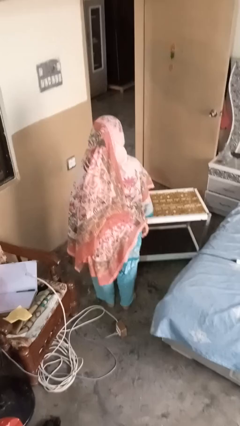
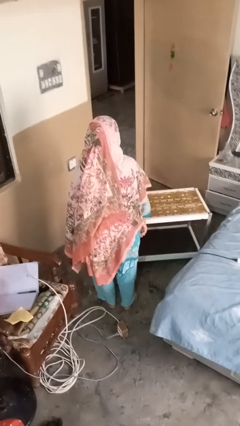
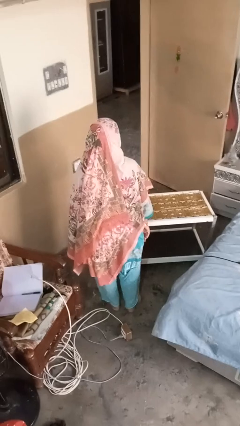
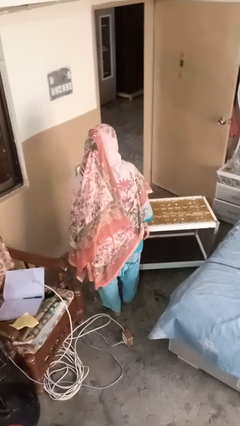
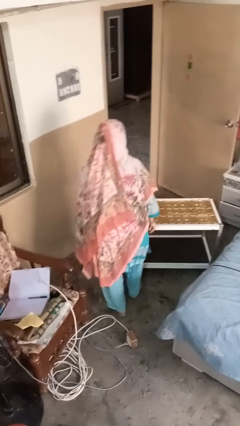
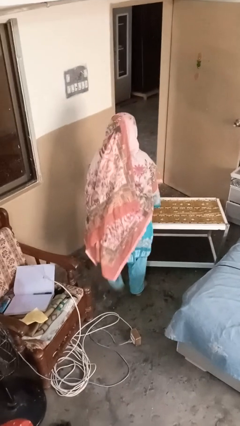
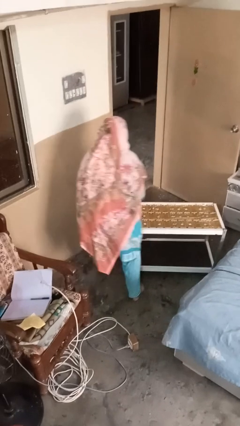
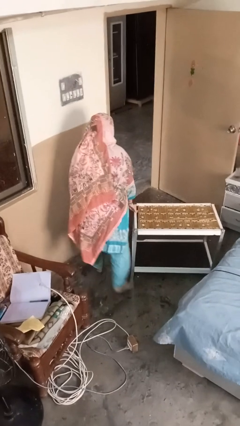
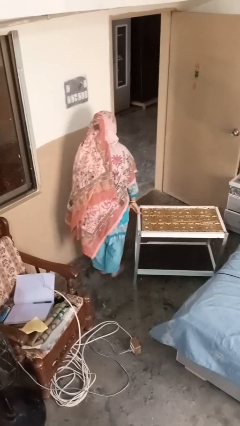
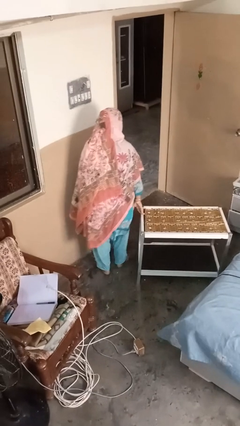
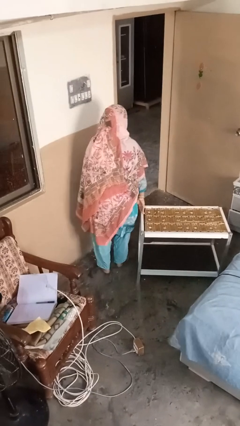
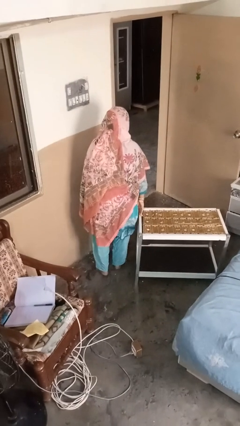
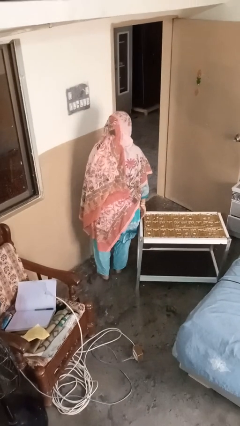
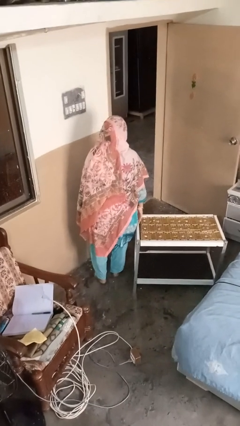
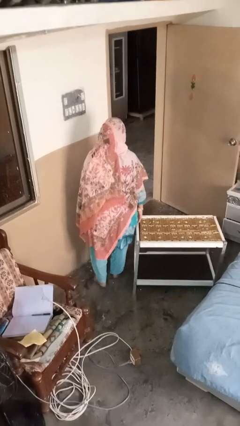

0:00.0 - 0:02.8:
person bumps into table

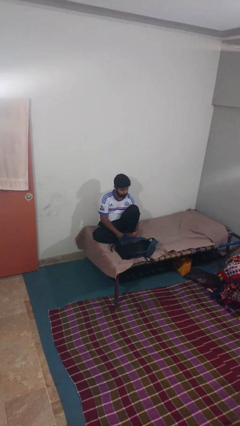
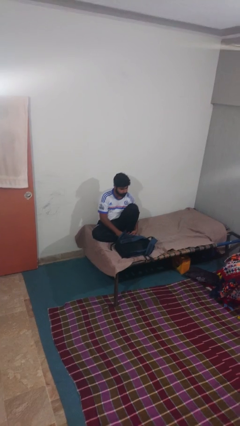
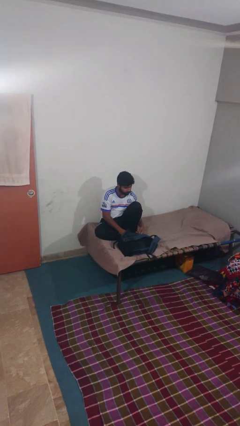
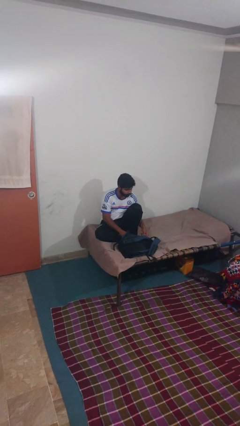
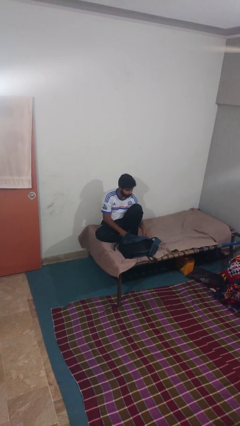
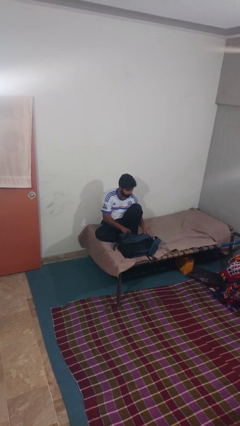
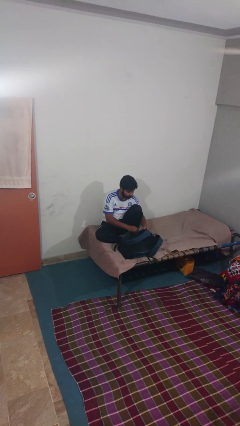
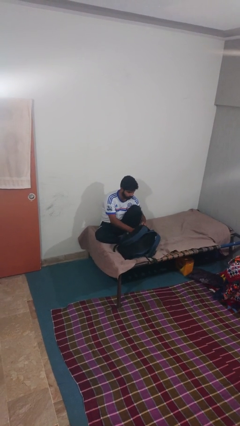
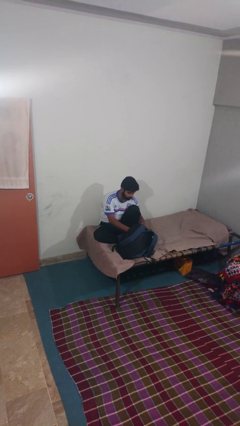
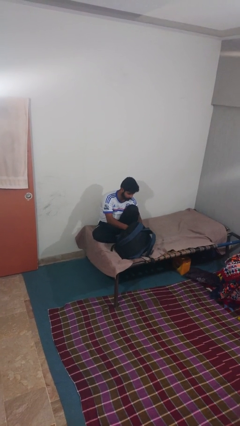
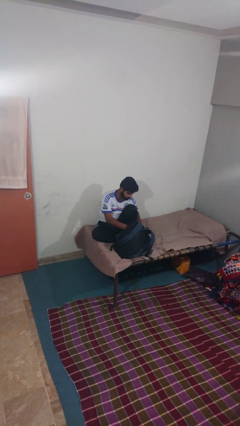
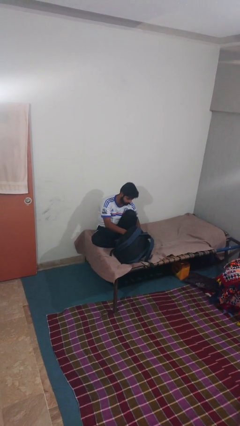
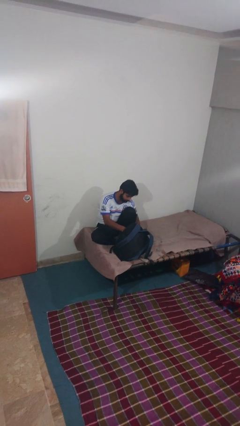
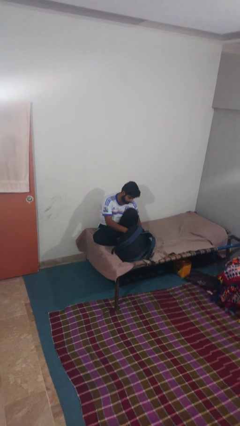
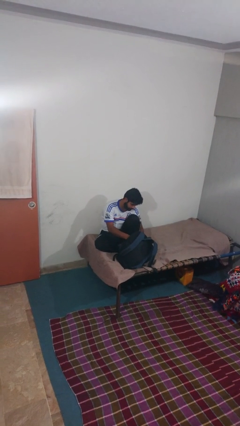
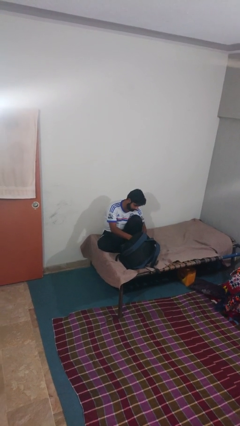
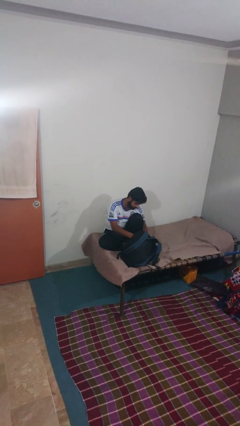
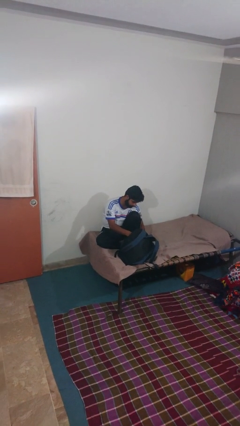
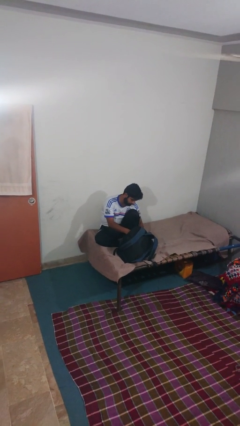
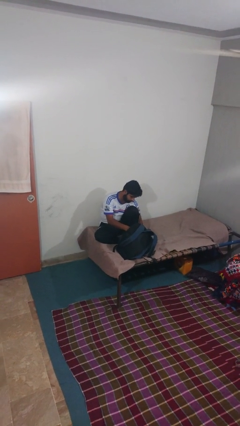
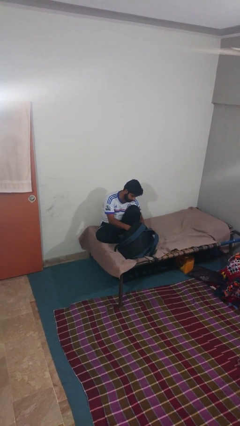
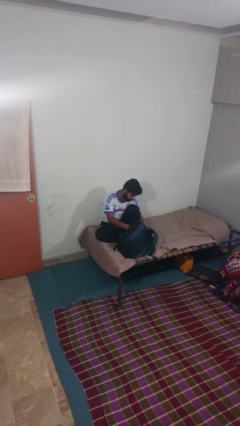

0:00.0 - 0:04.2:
person searches in backpack

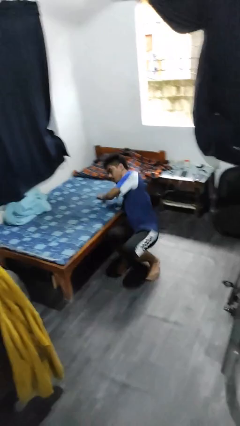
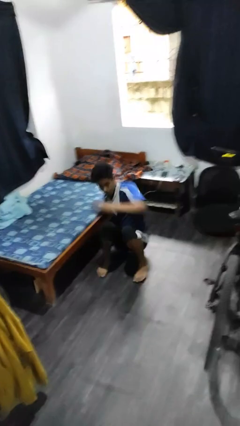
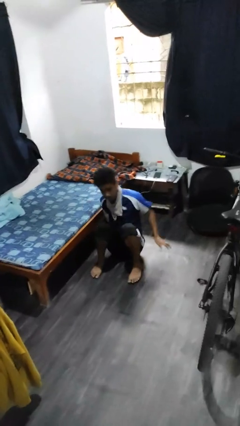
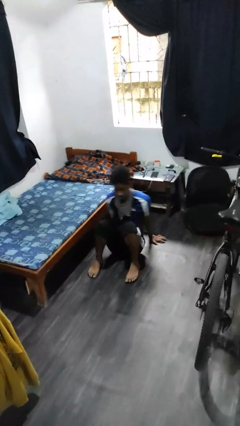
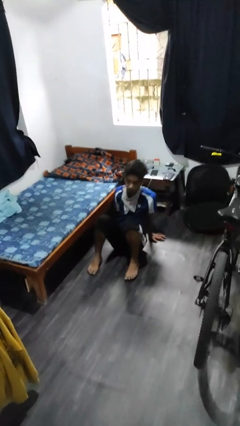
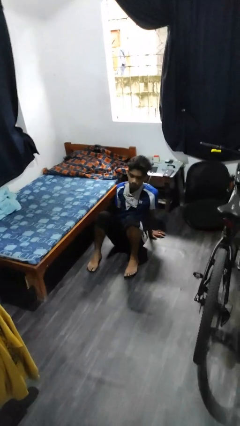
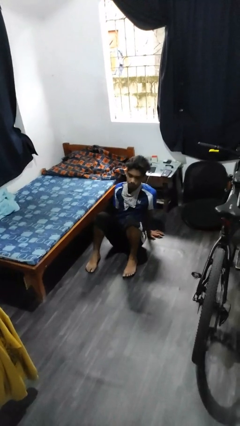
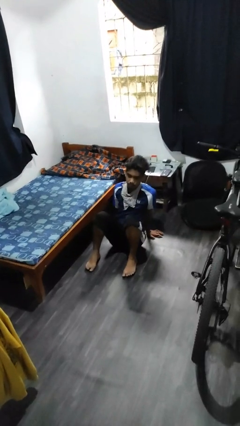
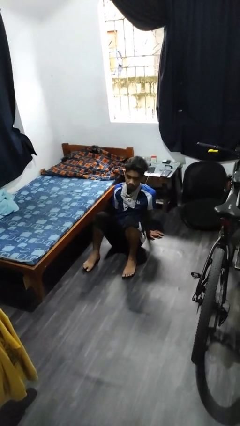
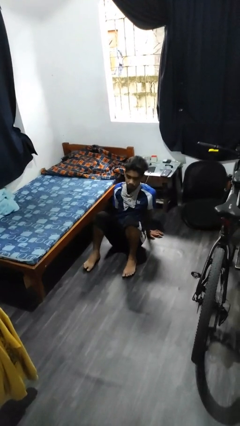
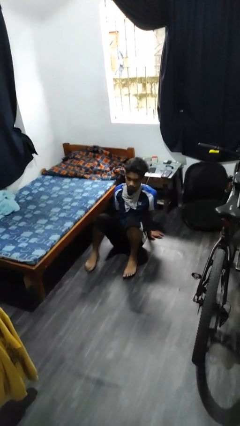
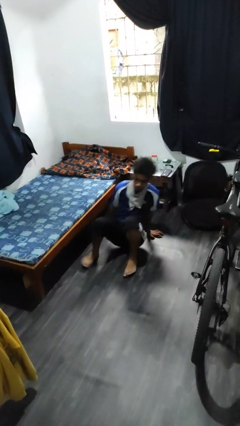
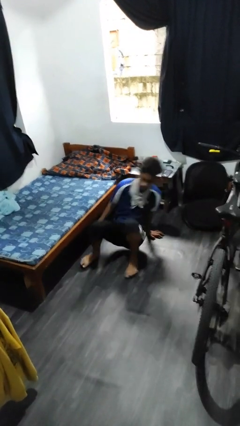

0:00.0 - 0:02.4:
person falls from bed

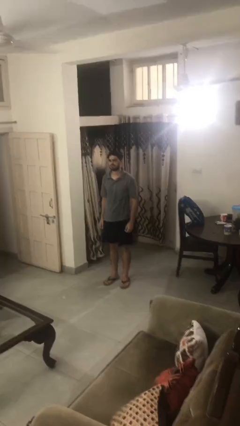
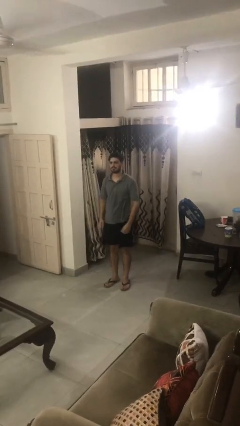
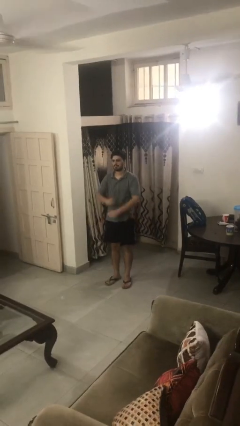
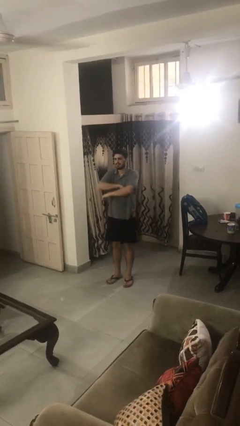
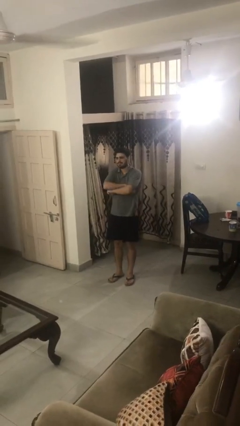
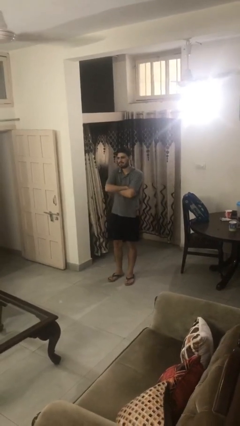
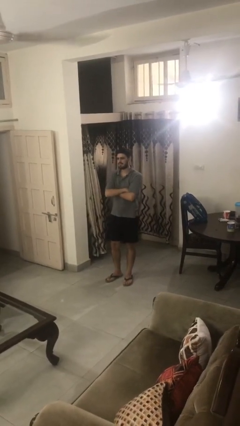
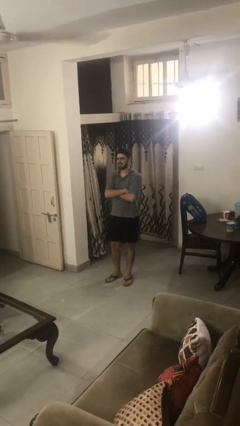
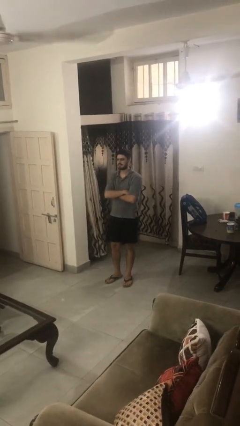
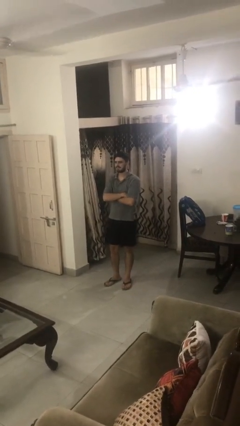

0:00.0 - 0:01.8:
person crosses arms

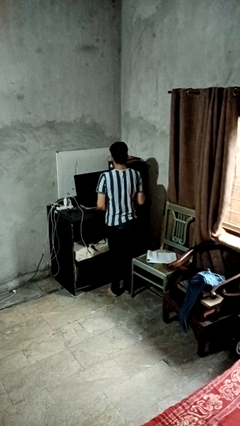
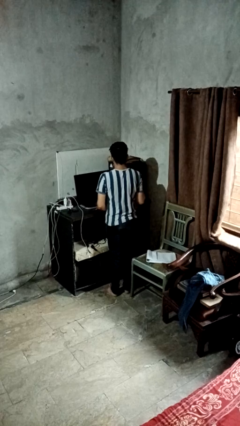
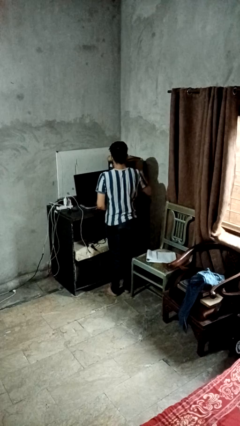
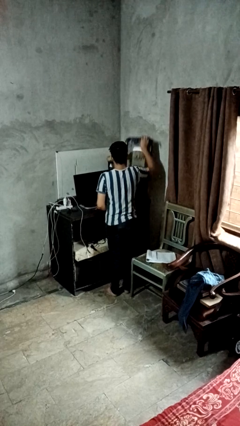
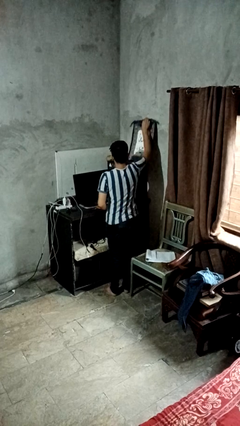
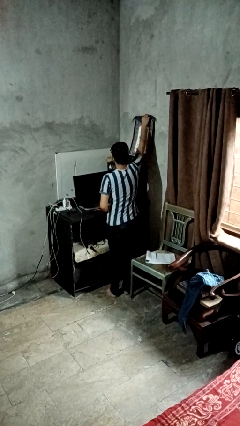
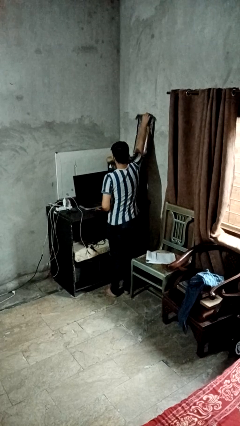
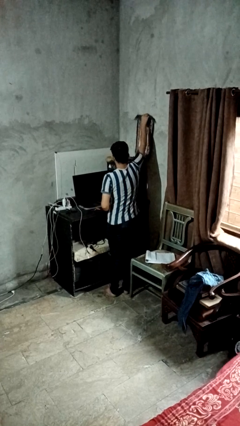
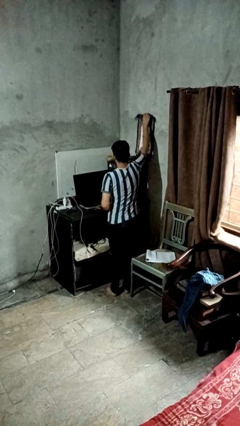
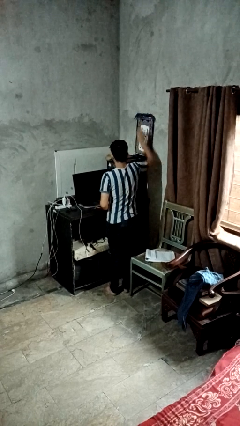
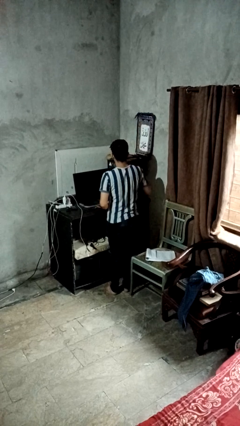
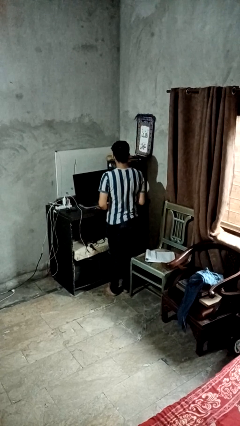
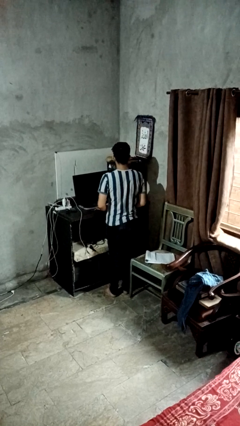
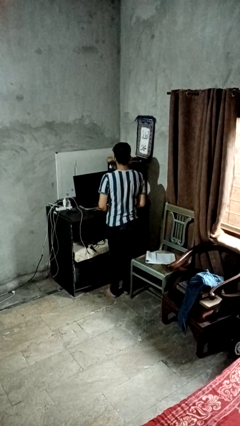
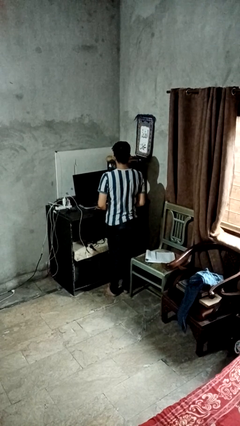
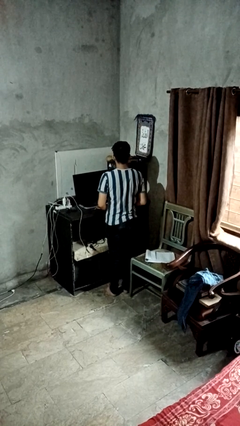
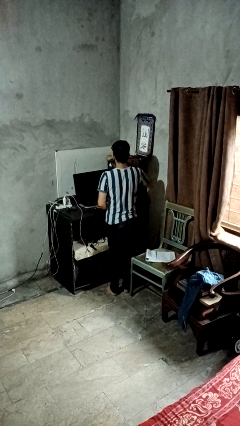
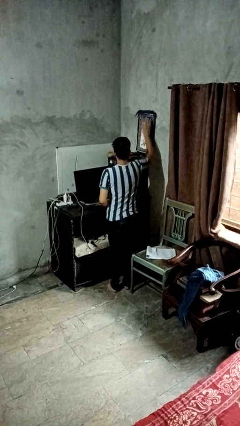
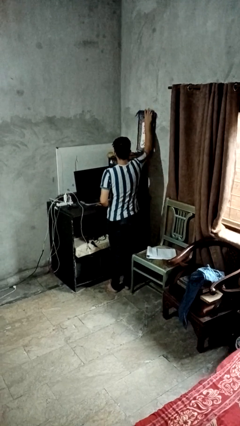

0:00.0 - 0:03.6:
person puts up picture frame

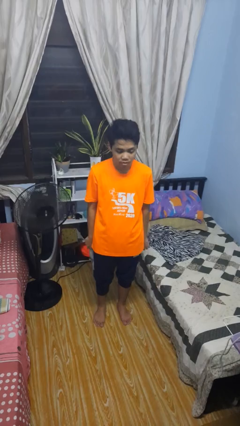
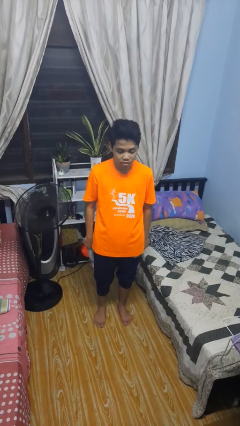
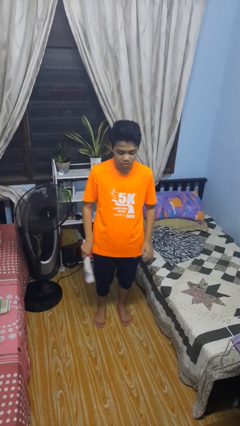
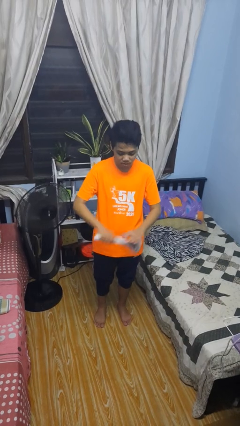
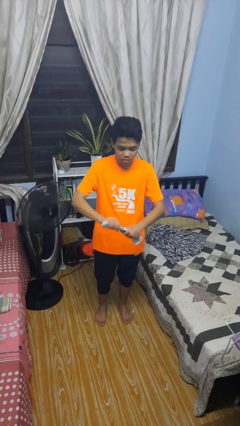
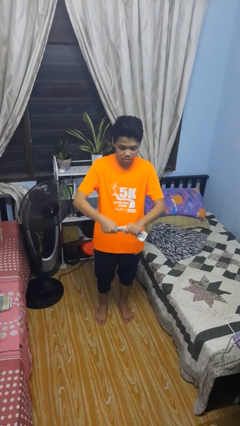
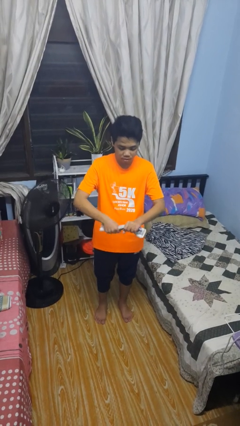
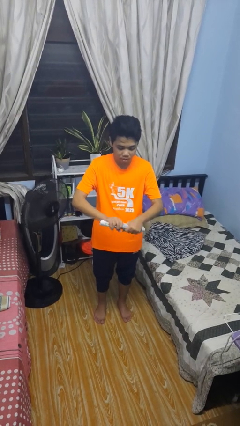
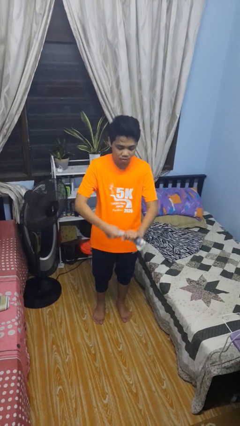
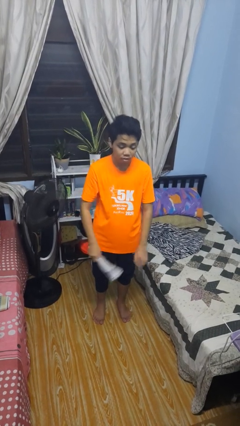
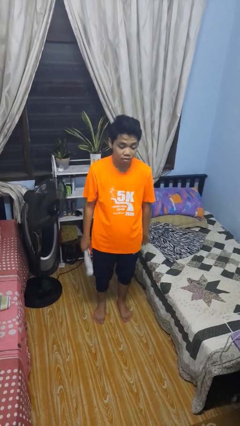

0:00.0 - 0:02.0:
person squeezes object

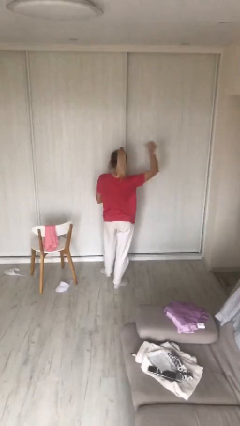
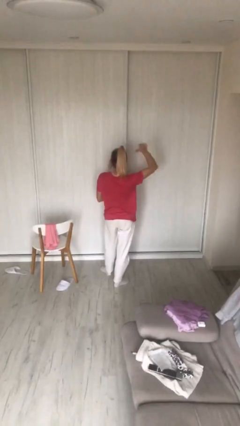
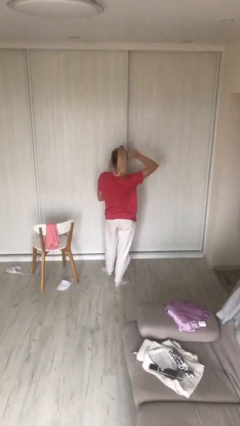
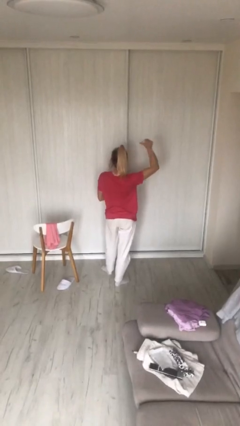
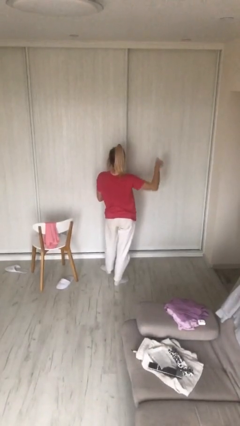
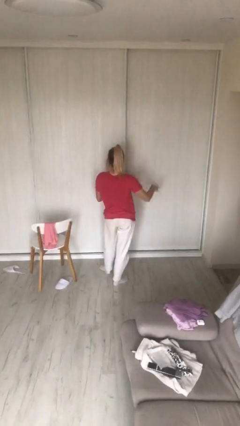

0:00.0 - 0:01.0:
person gestures behind me
